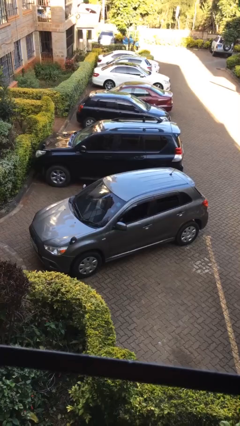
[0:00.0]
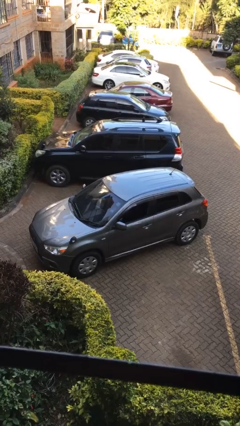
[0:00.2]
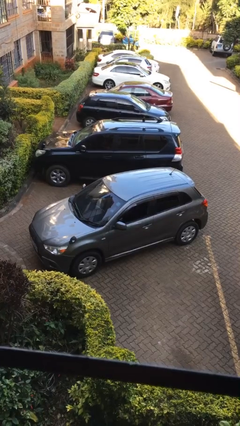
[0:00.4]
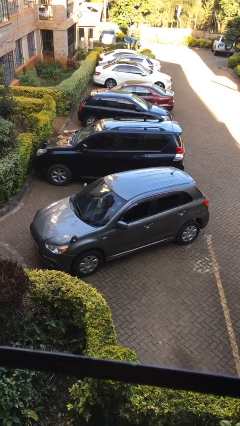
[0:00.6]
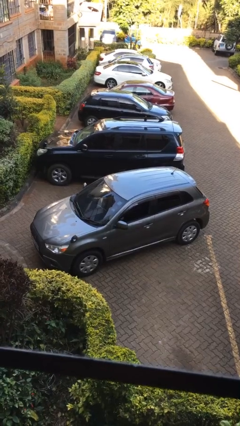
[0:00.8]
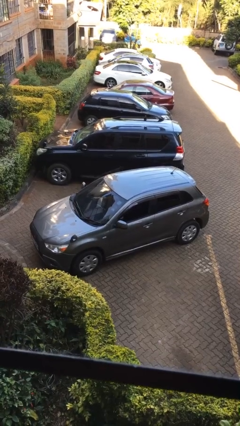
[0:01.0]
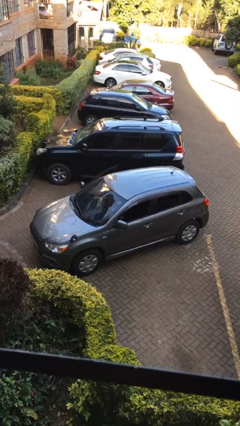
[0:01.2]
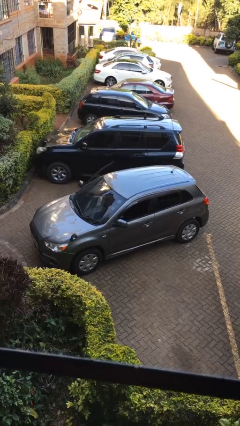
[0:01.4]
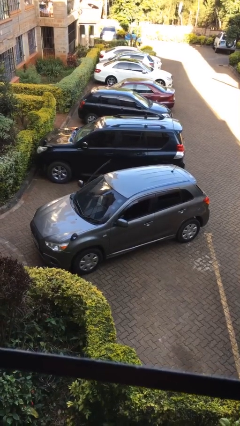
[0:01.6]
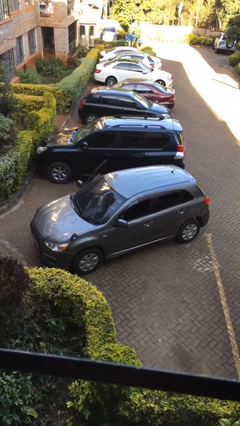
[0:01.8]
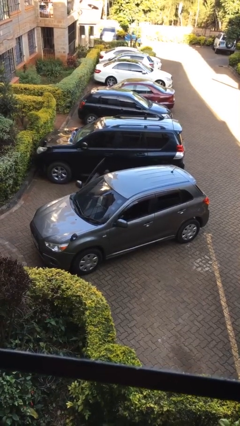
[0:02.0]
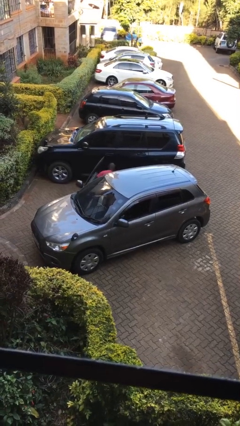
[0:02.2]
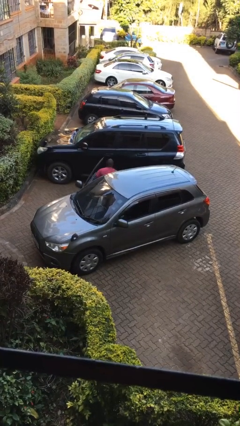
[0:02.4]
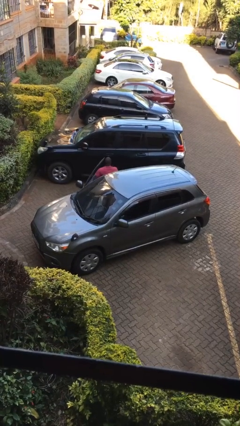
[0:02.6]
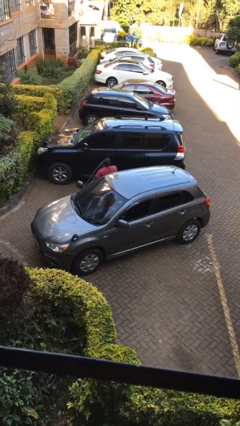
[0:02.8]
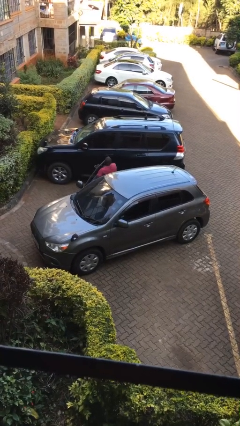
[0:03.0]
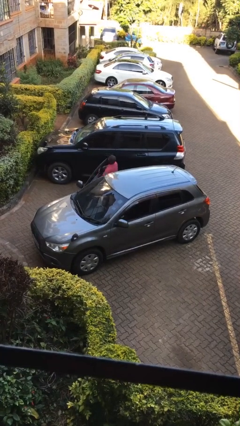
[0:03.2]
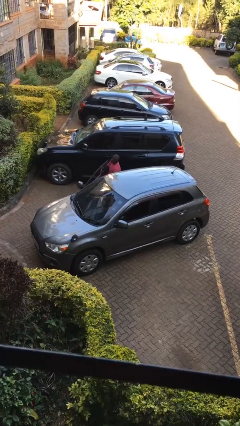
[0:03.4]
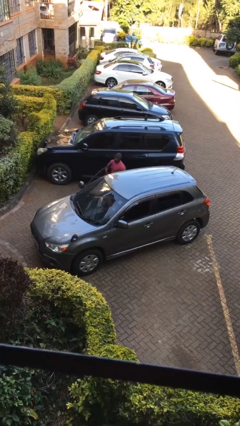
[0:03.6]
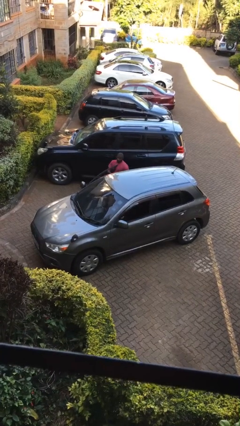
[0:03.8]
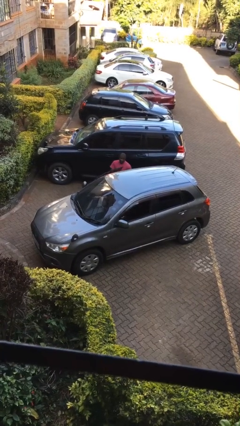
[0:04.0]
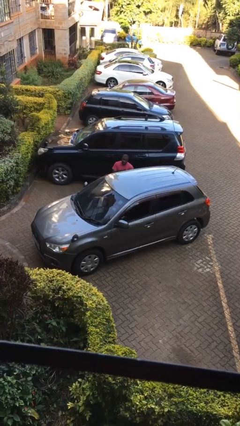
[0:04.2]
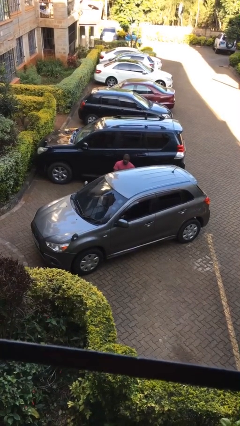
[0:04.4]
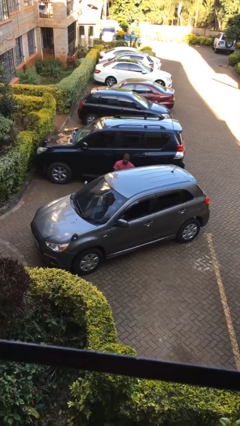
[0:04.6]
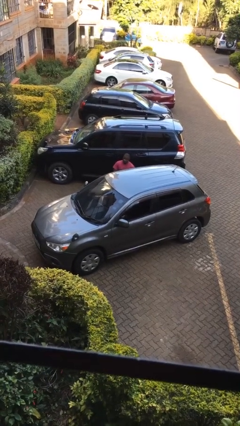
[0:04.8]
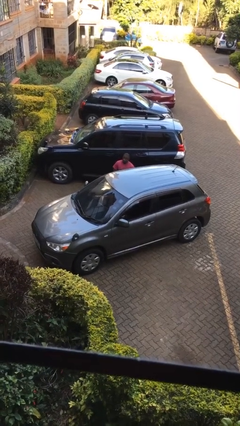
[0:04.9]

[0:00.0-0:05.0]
car drops off person

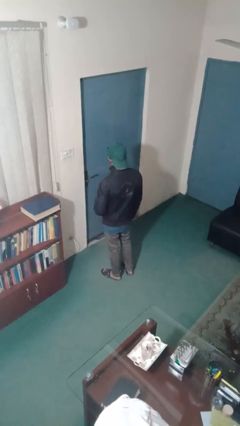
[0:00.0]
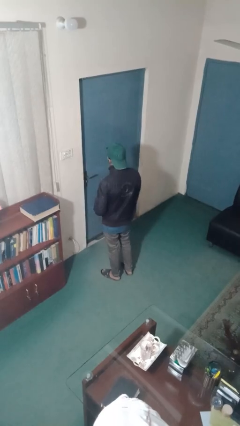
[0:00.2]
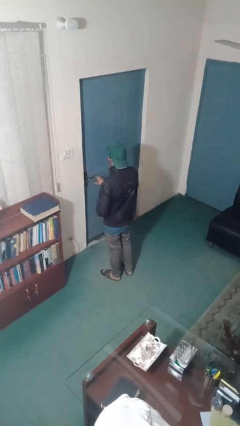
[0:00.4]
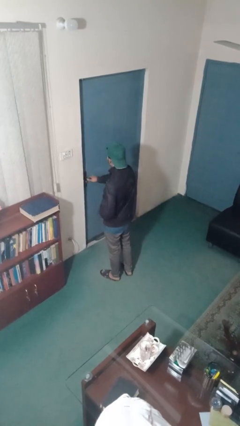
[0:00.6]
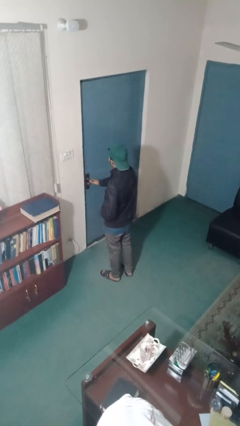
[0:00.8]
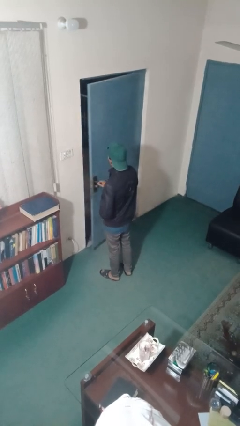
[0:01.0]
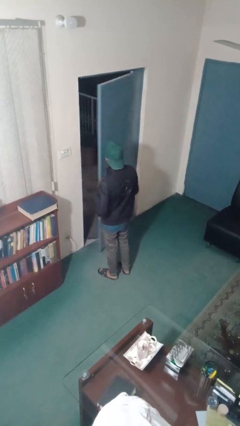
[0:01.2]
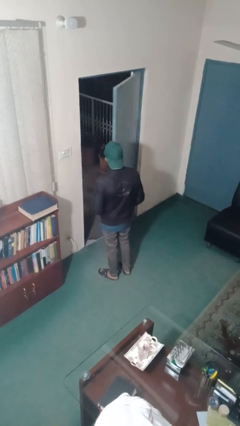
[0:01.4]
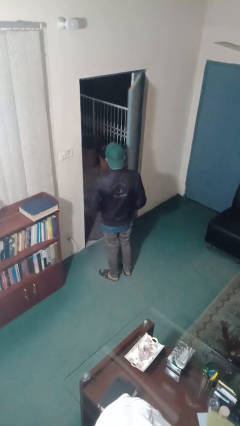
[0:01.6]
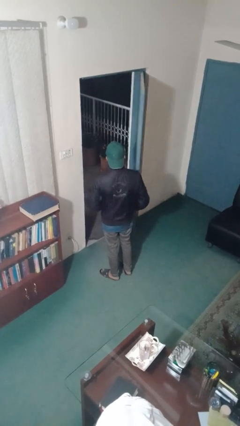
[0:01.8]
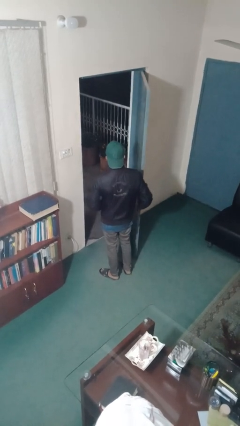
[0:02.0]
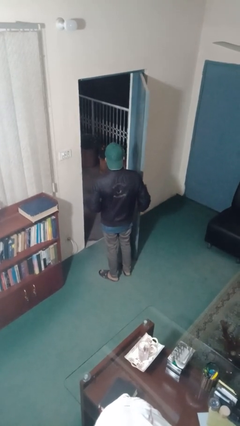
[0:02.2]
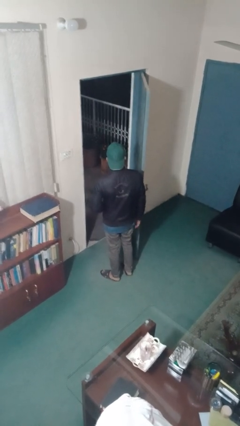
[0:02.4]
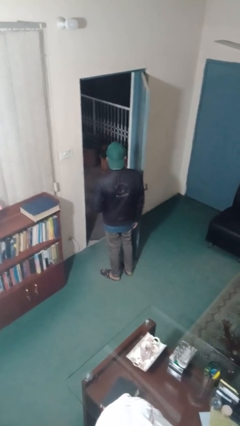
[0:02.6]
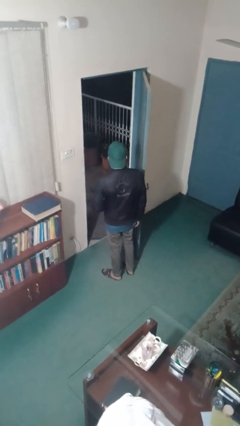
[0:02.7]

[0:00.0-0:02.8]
person opens facility door

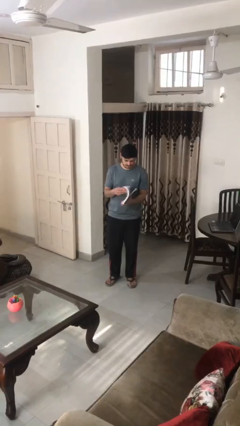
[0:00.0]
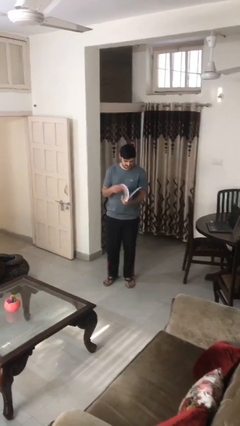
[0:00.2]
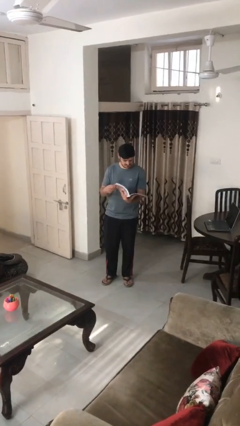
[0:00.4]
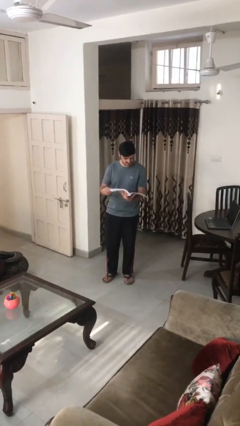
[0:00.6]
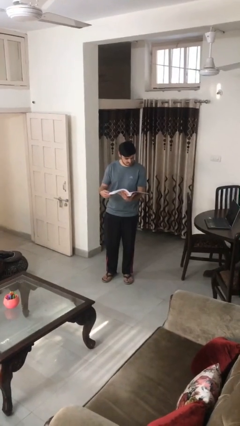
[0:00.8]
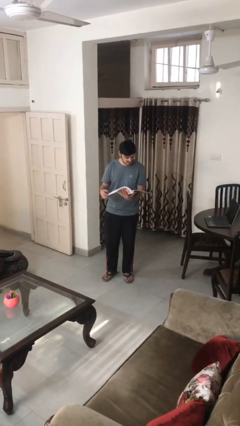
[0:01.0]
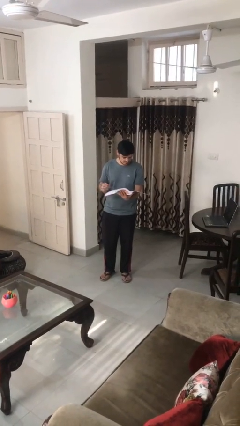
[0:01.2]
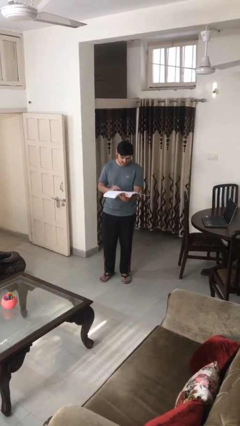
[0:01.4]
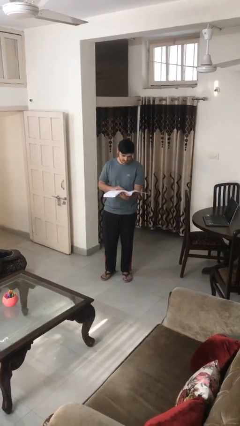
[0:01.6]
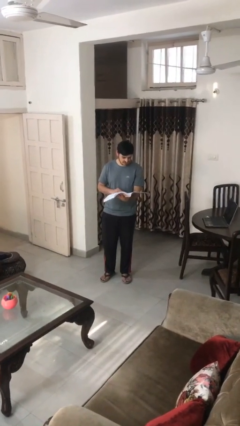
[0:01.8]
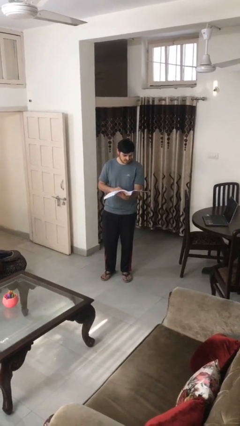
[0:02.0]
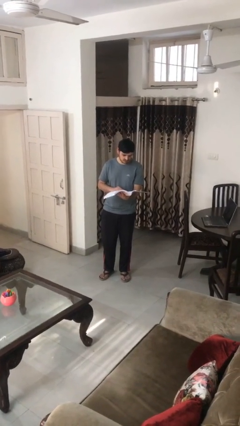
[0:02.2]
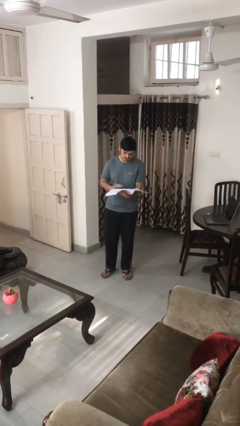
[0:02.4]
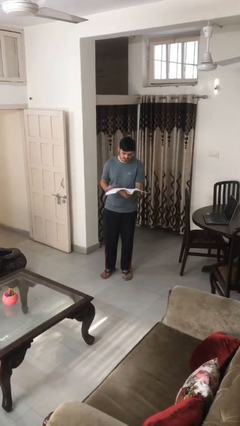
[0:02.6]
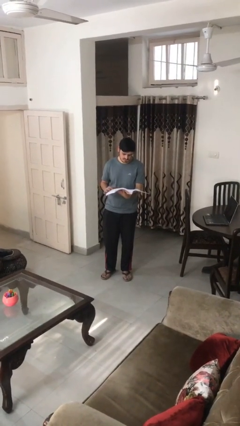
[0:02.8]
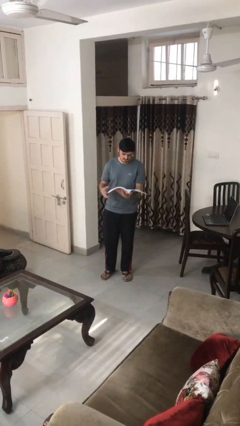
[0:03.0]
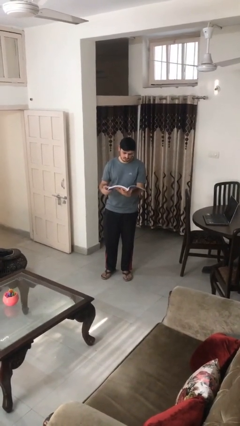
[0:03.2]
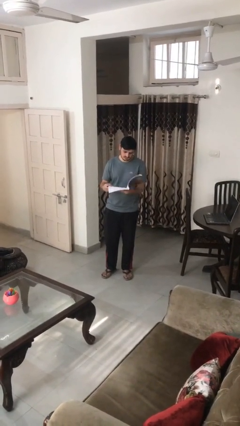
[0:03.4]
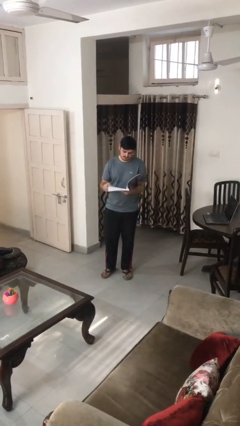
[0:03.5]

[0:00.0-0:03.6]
person reads document

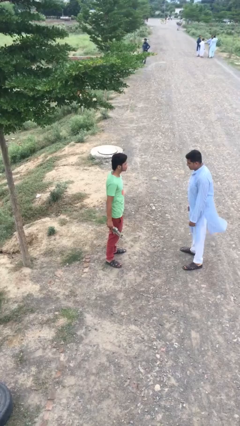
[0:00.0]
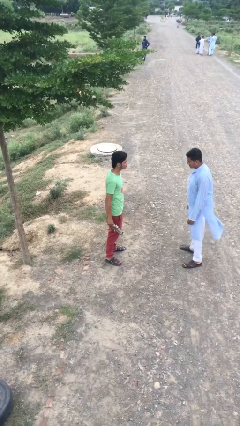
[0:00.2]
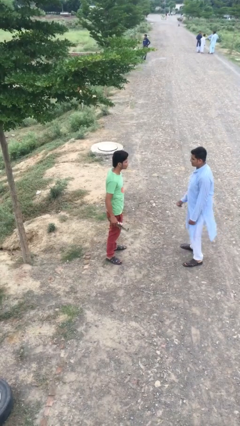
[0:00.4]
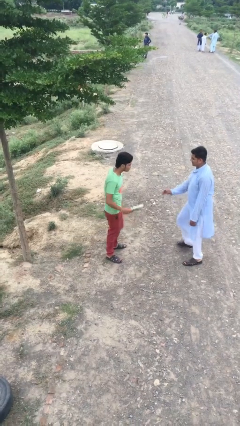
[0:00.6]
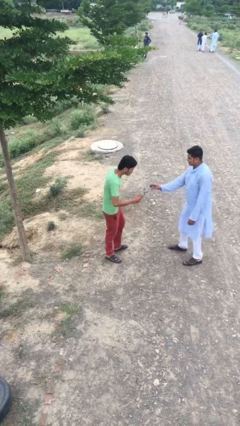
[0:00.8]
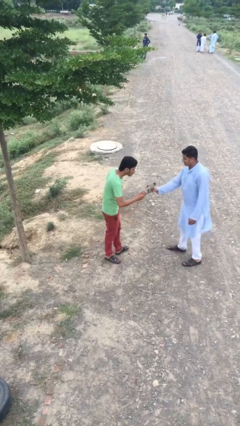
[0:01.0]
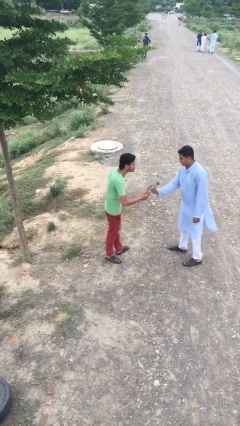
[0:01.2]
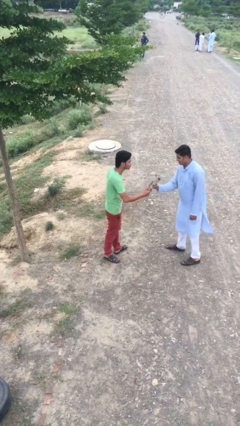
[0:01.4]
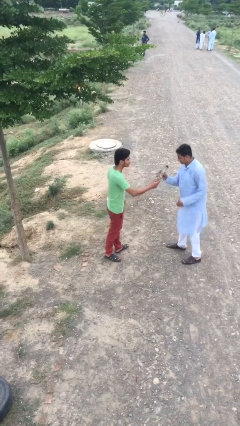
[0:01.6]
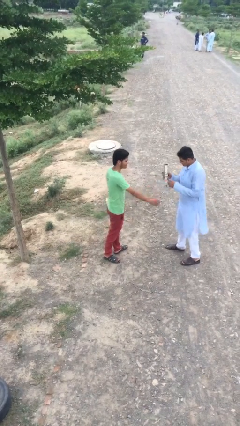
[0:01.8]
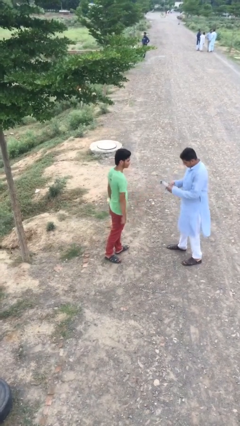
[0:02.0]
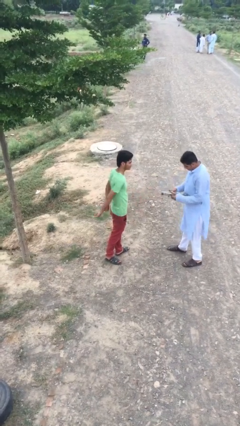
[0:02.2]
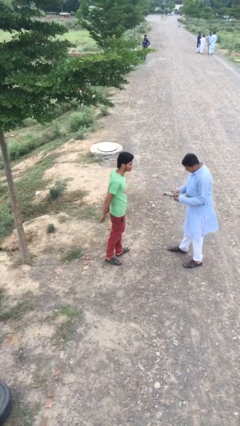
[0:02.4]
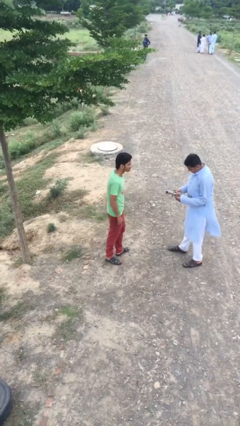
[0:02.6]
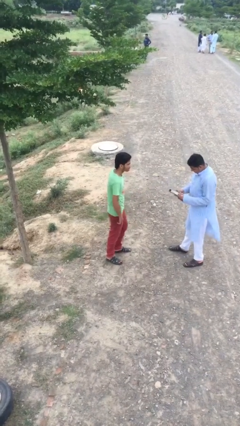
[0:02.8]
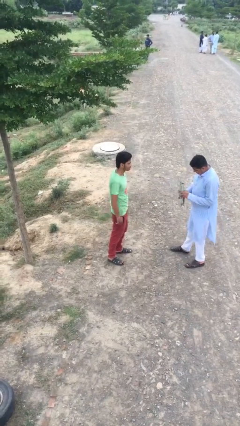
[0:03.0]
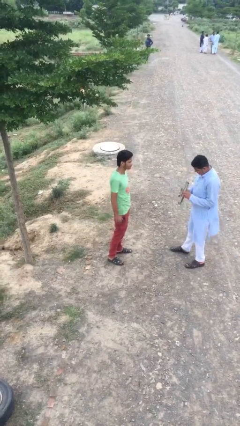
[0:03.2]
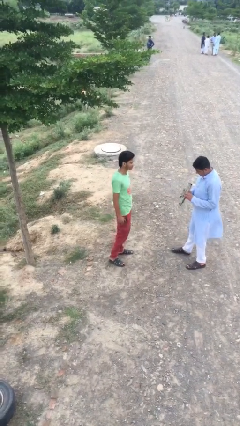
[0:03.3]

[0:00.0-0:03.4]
person transfers object to person

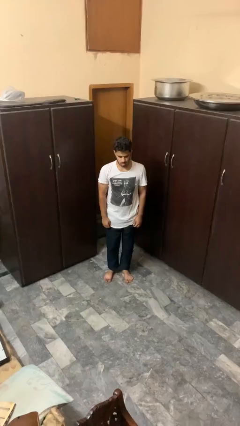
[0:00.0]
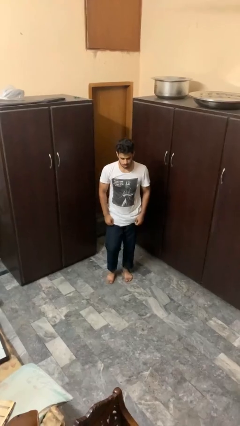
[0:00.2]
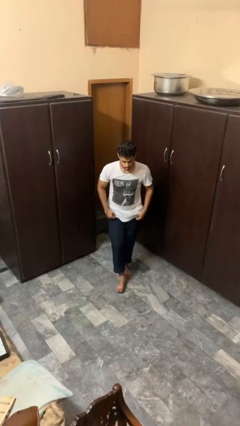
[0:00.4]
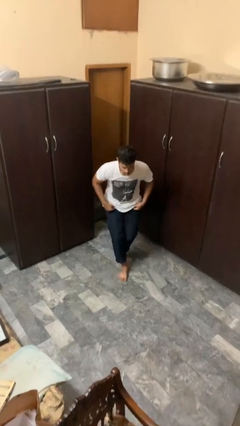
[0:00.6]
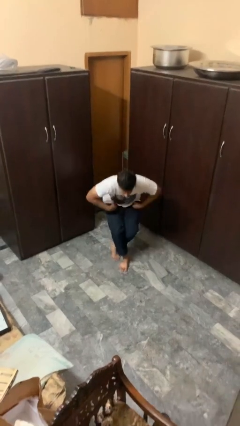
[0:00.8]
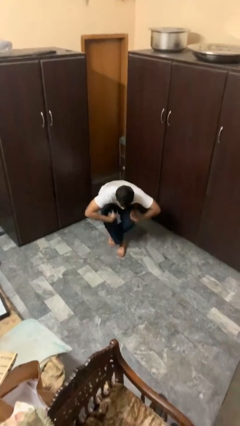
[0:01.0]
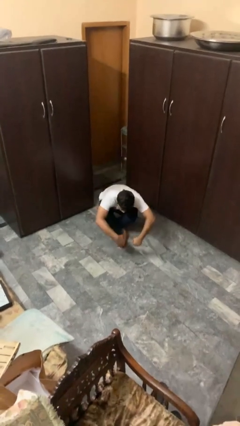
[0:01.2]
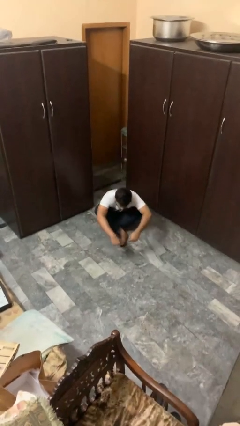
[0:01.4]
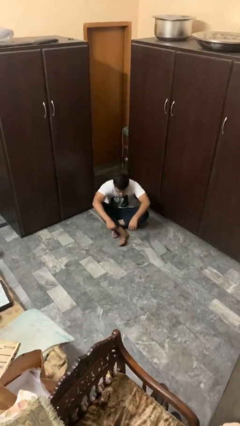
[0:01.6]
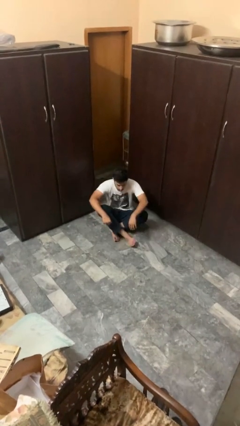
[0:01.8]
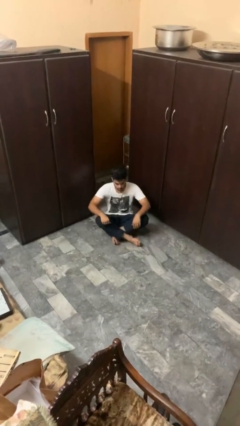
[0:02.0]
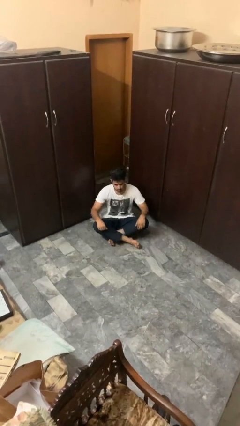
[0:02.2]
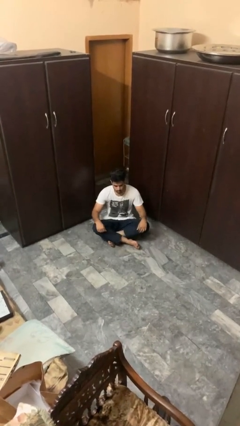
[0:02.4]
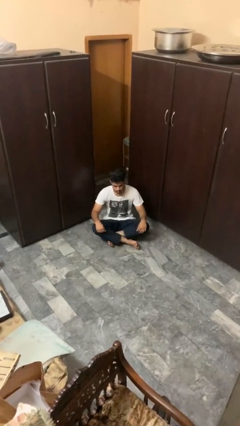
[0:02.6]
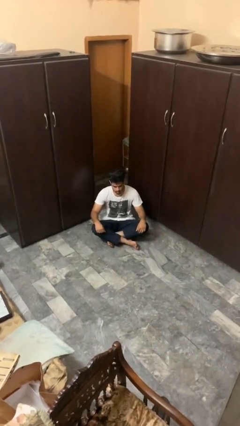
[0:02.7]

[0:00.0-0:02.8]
person sits crisscross

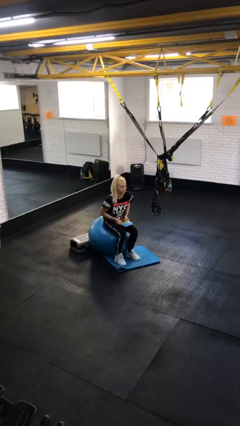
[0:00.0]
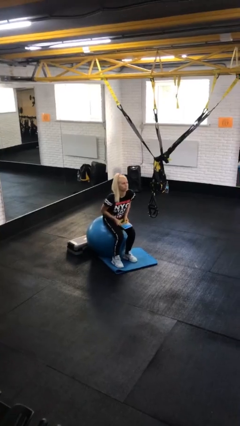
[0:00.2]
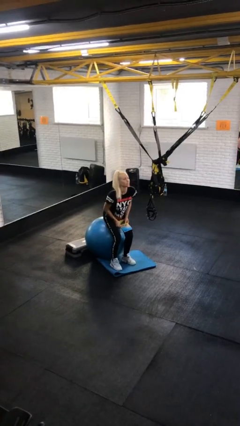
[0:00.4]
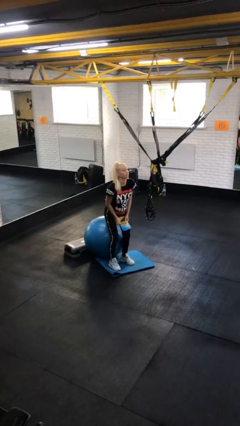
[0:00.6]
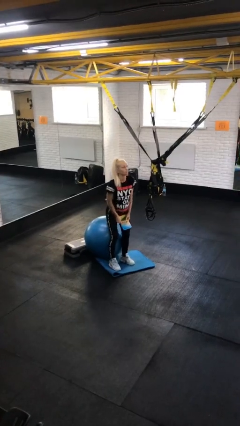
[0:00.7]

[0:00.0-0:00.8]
person stands up
